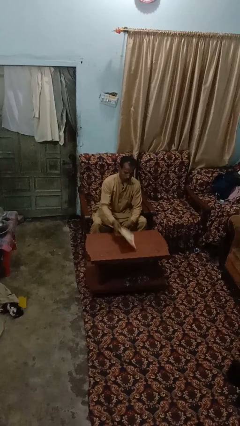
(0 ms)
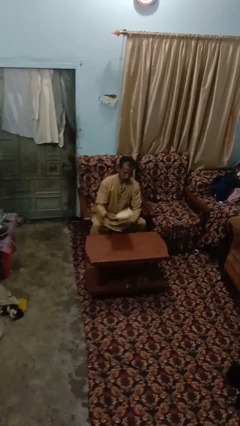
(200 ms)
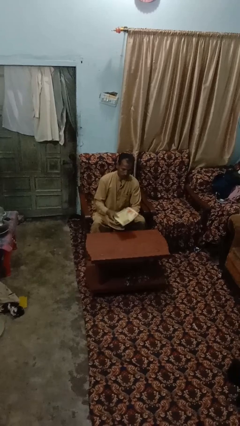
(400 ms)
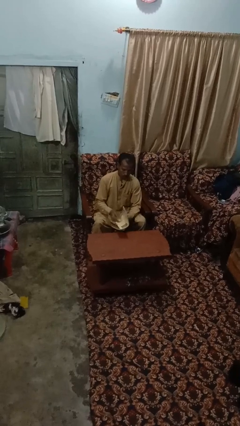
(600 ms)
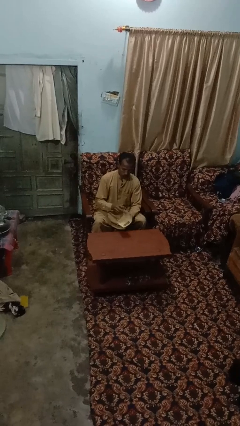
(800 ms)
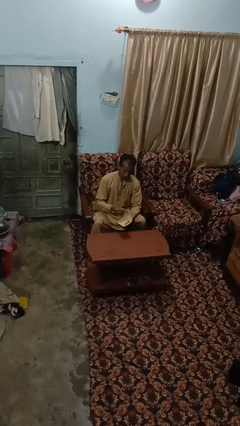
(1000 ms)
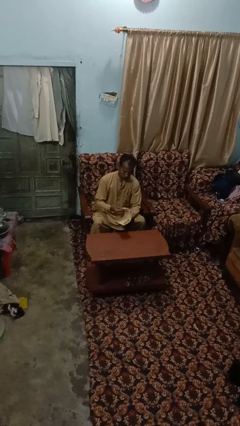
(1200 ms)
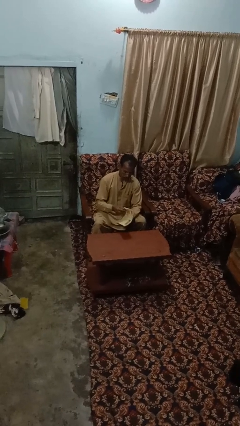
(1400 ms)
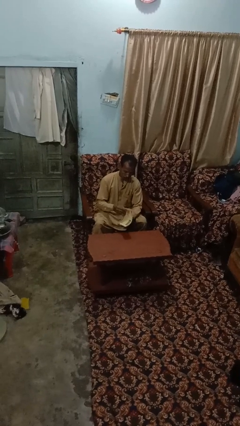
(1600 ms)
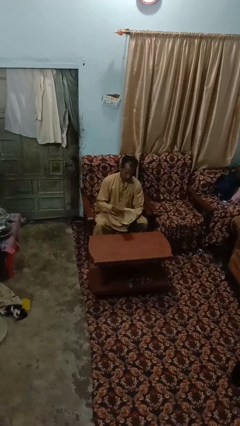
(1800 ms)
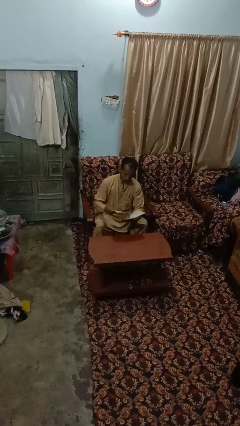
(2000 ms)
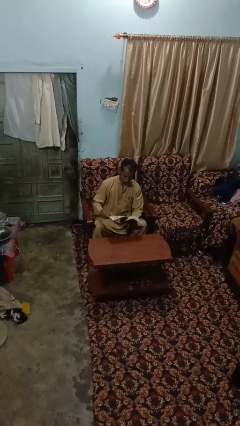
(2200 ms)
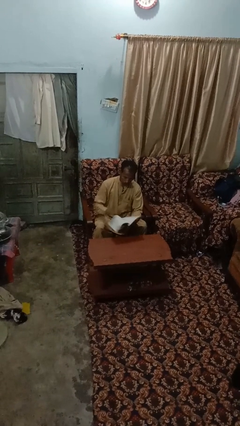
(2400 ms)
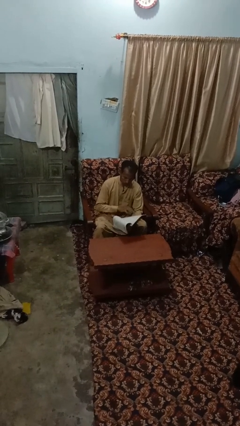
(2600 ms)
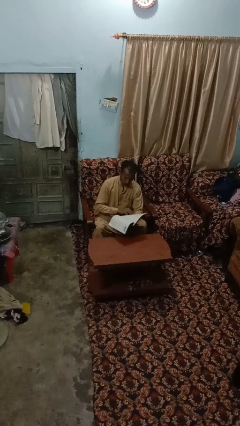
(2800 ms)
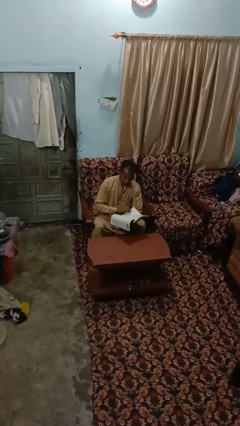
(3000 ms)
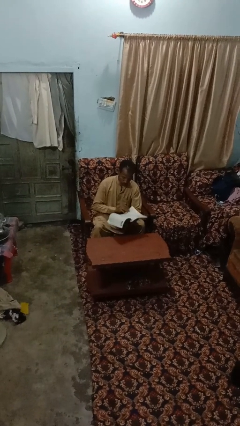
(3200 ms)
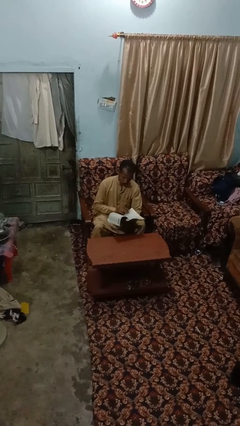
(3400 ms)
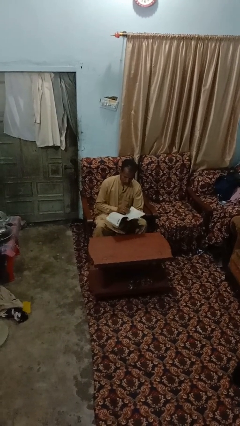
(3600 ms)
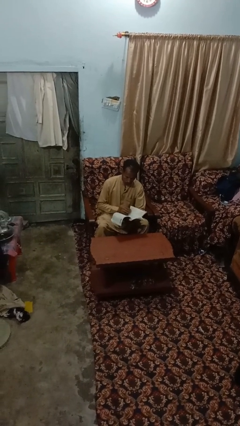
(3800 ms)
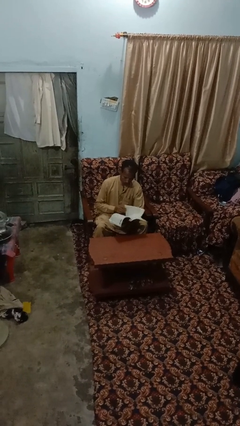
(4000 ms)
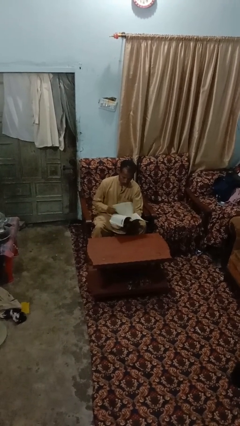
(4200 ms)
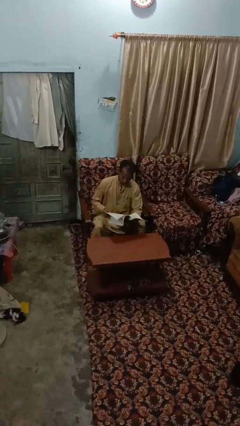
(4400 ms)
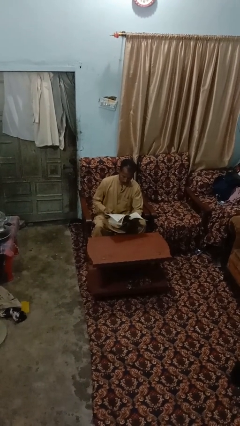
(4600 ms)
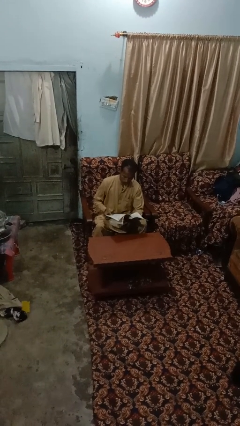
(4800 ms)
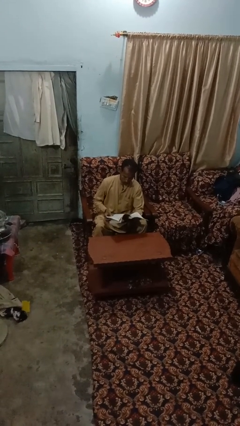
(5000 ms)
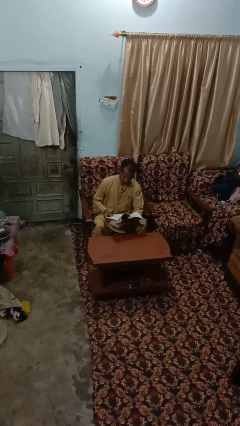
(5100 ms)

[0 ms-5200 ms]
person reads magazine

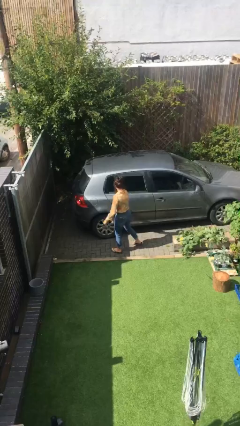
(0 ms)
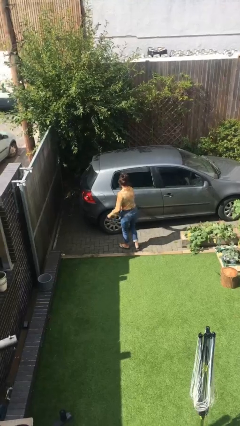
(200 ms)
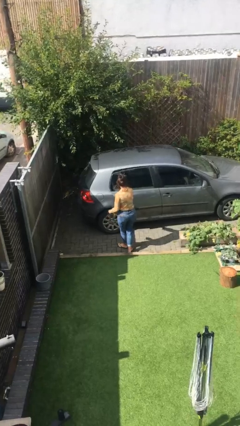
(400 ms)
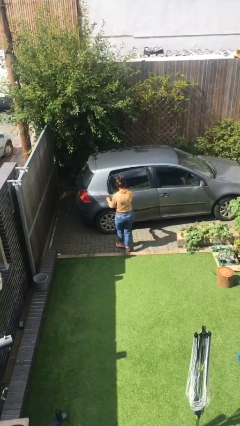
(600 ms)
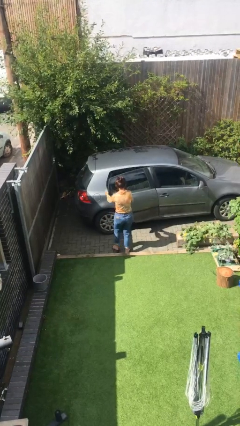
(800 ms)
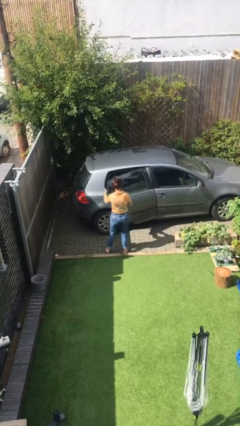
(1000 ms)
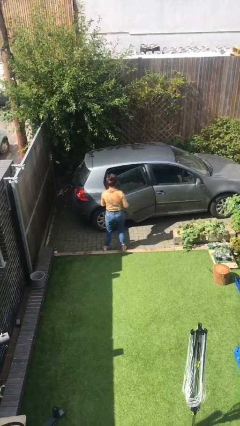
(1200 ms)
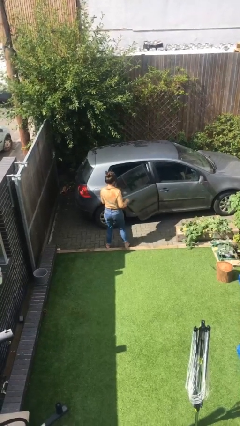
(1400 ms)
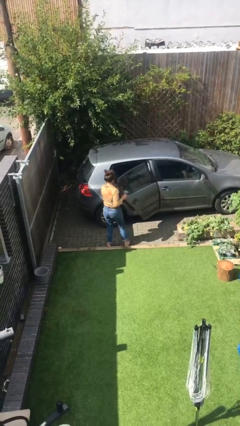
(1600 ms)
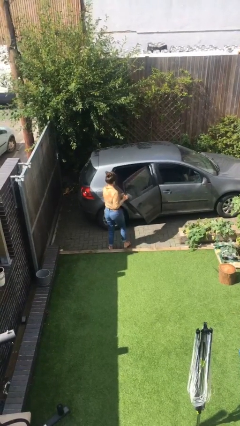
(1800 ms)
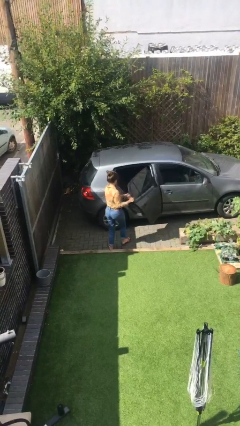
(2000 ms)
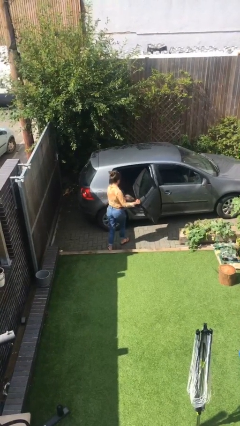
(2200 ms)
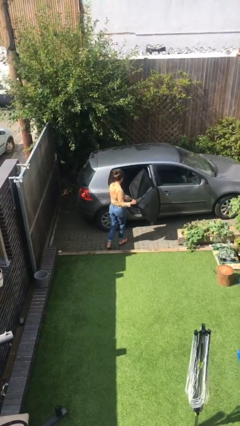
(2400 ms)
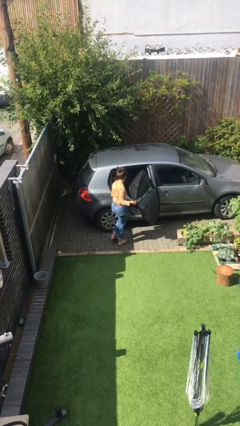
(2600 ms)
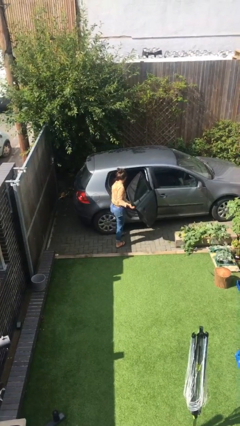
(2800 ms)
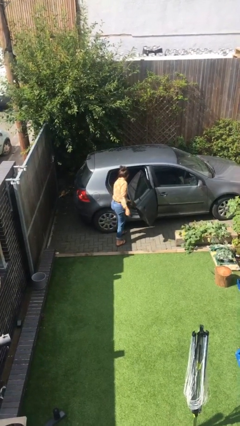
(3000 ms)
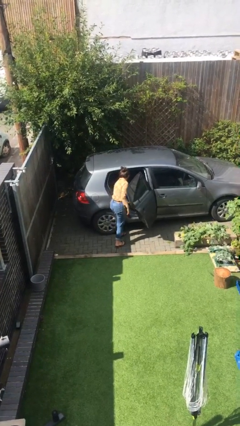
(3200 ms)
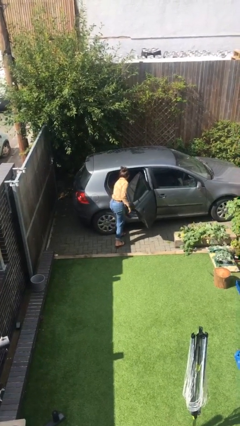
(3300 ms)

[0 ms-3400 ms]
person opens car door

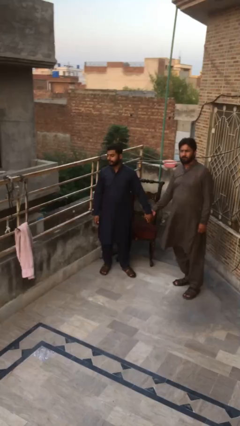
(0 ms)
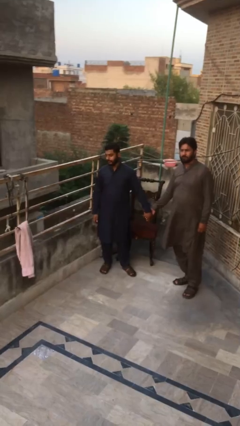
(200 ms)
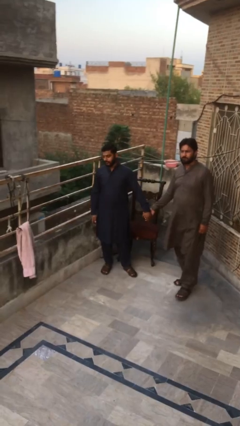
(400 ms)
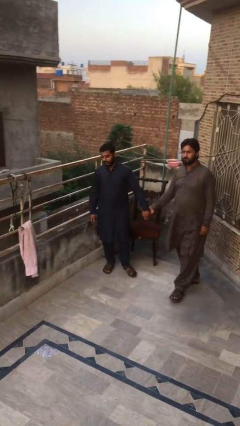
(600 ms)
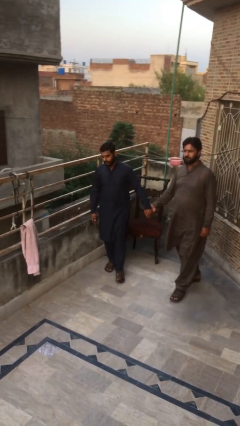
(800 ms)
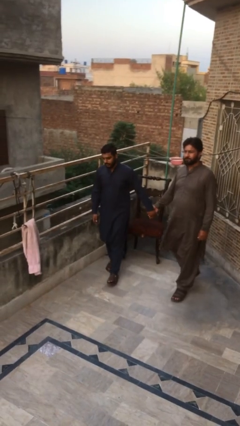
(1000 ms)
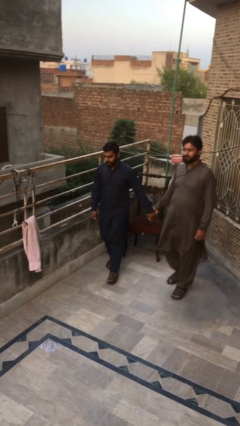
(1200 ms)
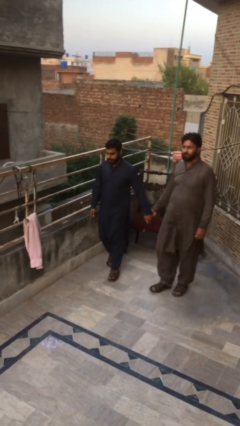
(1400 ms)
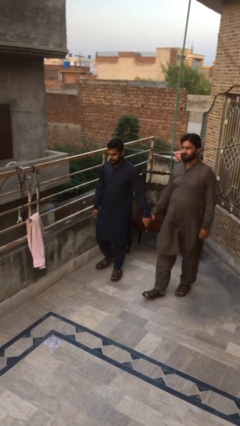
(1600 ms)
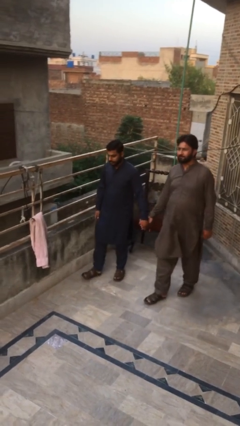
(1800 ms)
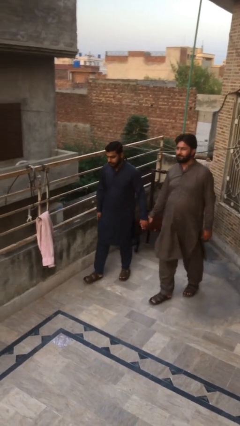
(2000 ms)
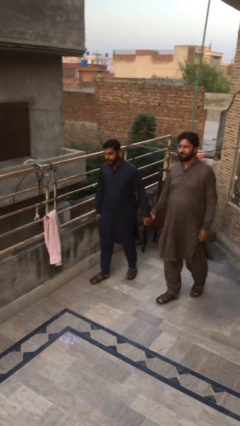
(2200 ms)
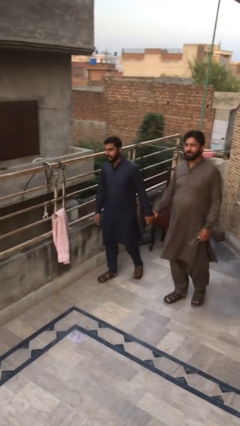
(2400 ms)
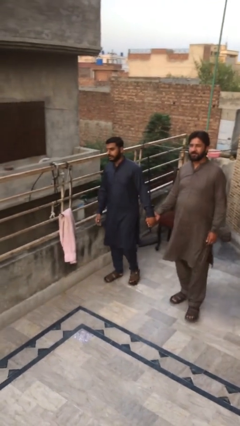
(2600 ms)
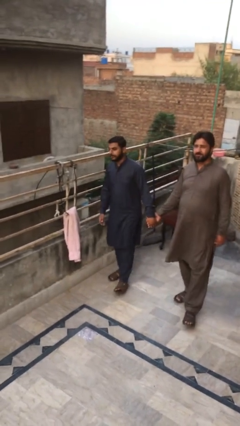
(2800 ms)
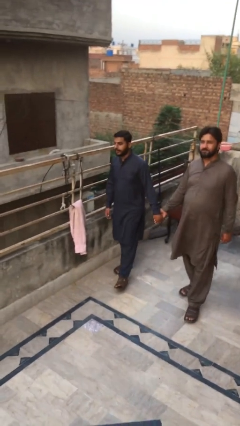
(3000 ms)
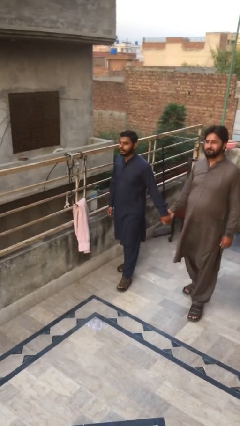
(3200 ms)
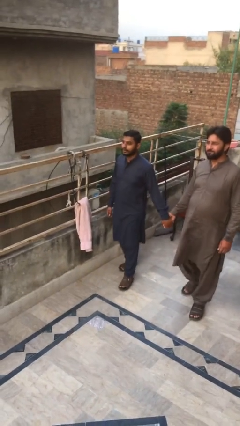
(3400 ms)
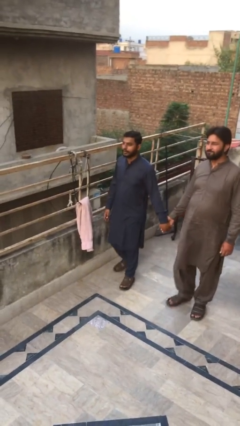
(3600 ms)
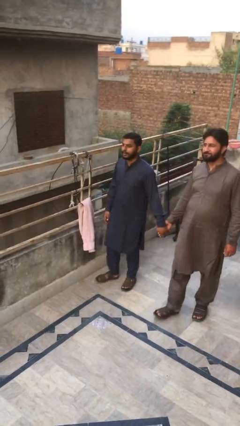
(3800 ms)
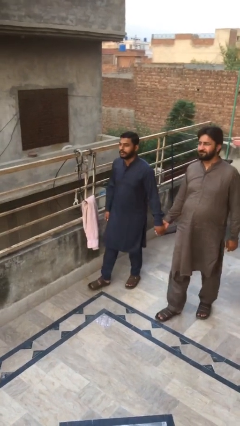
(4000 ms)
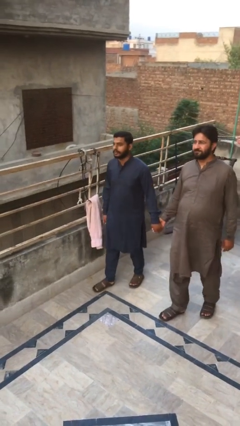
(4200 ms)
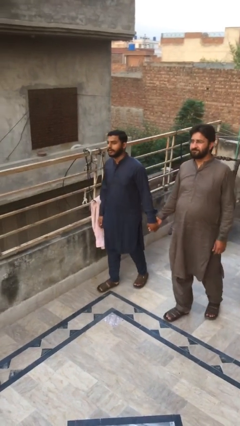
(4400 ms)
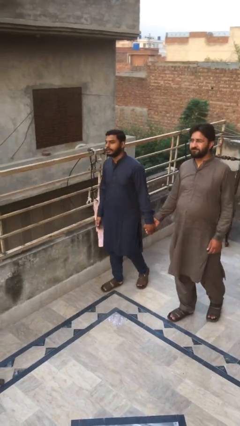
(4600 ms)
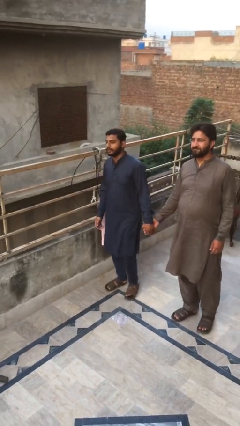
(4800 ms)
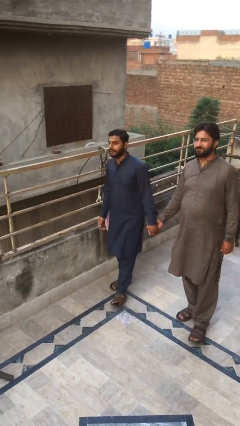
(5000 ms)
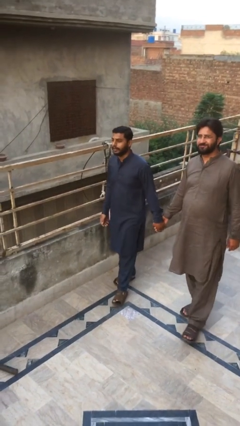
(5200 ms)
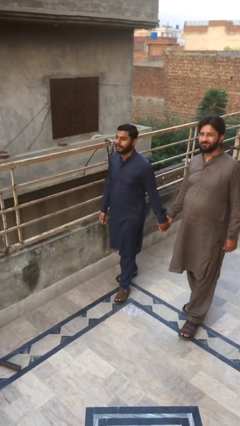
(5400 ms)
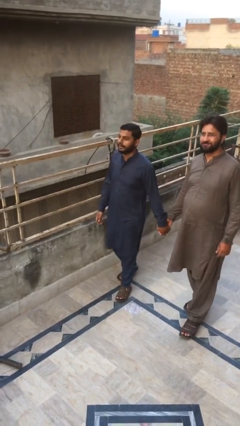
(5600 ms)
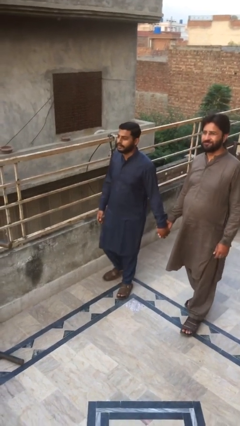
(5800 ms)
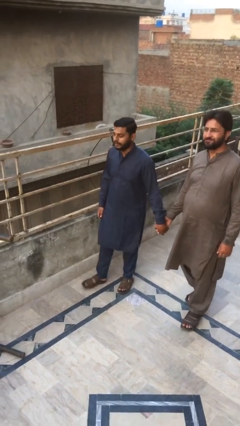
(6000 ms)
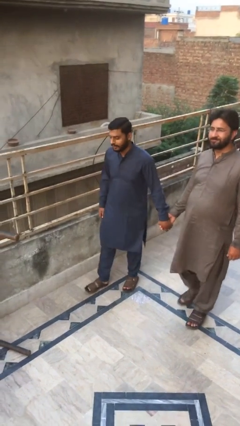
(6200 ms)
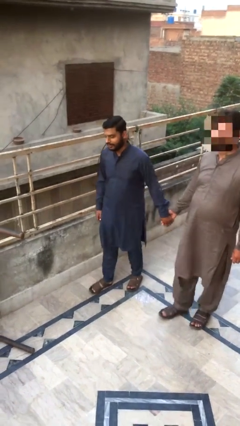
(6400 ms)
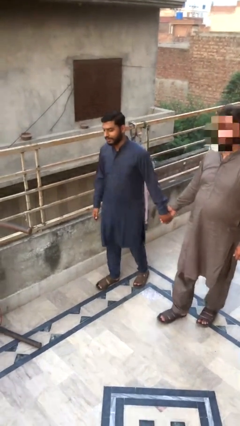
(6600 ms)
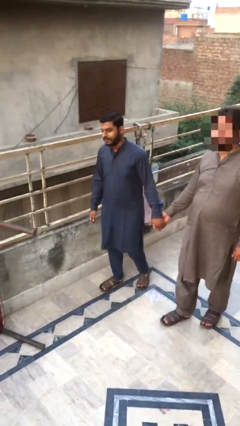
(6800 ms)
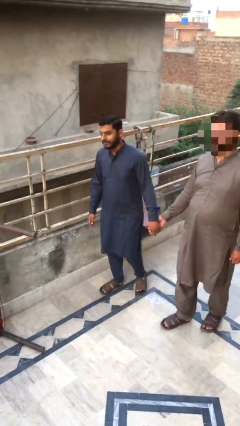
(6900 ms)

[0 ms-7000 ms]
person holds hand

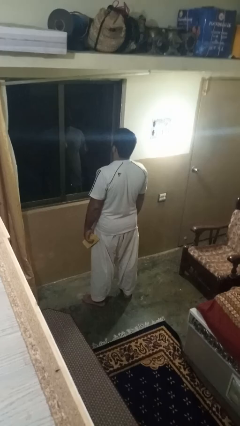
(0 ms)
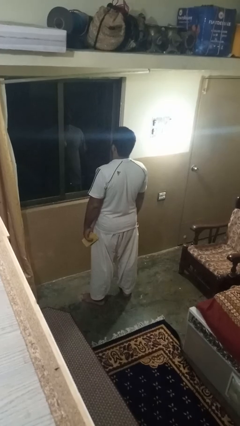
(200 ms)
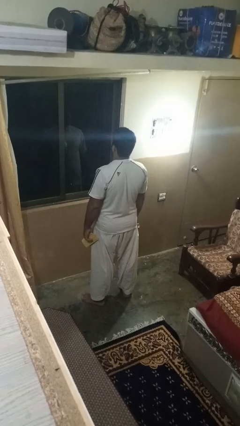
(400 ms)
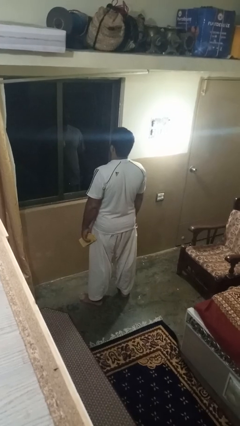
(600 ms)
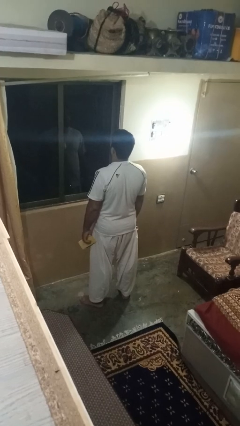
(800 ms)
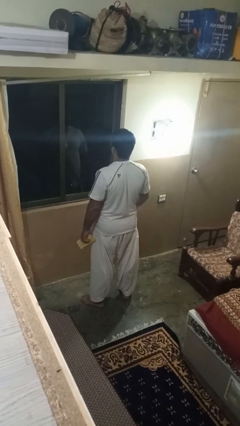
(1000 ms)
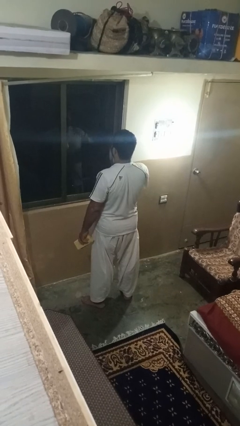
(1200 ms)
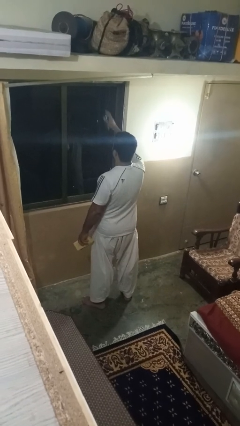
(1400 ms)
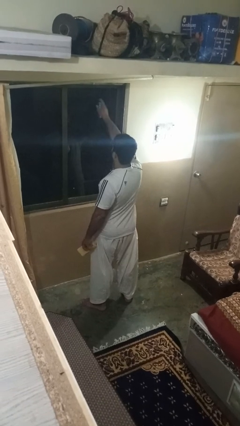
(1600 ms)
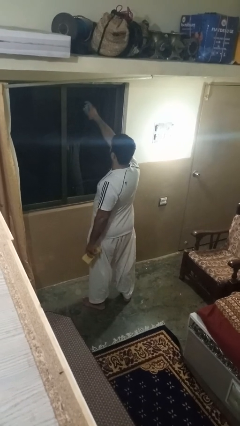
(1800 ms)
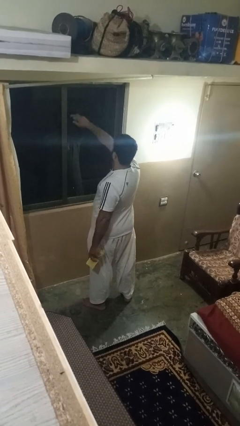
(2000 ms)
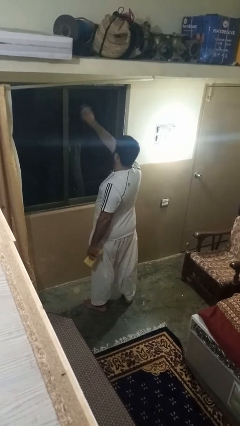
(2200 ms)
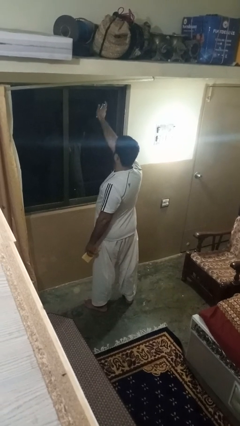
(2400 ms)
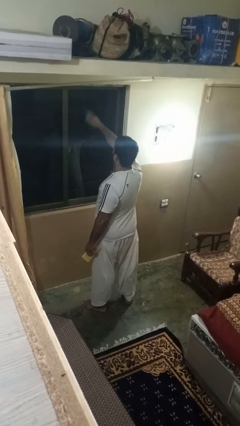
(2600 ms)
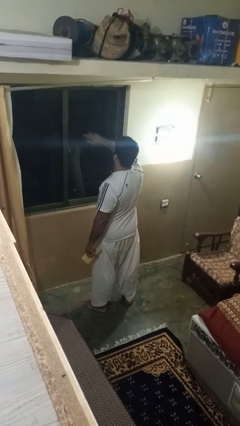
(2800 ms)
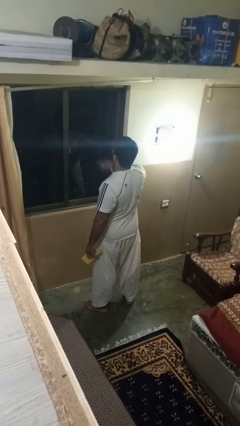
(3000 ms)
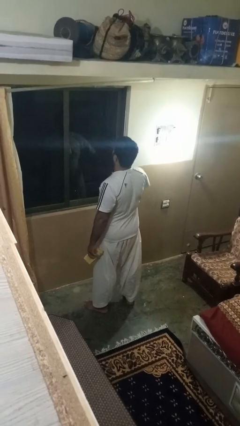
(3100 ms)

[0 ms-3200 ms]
person sprays from bottle
